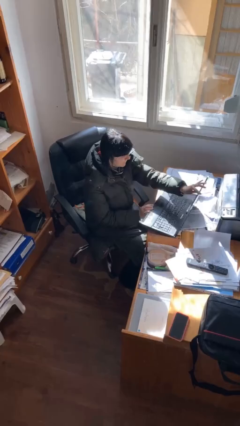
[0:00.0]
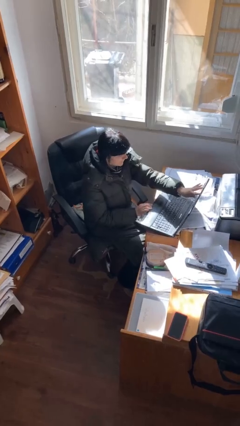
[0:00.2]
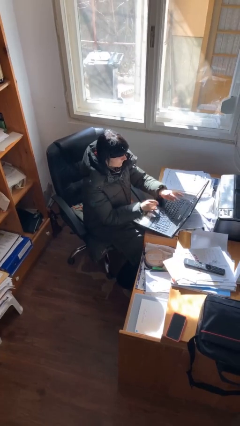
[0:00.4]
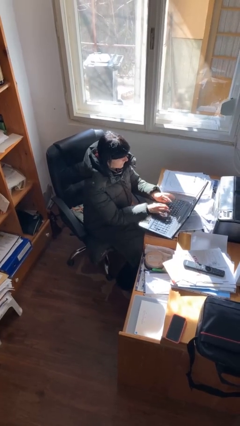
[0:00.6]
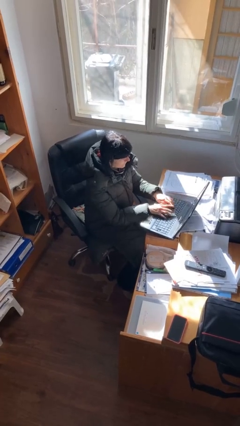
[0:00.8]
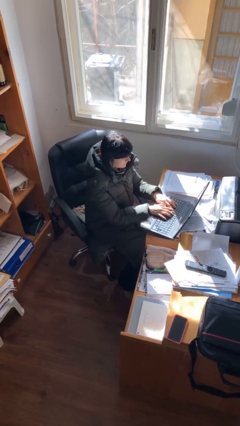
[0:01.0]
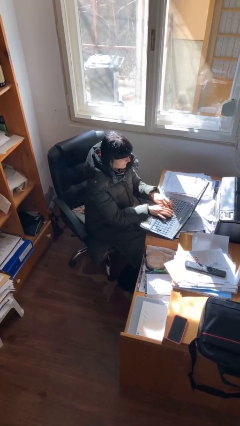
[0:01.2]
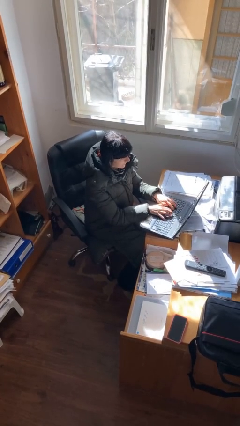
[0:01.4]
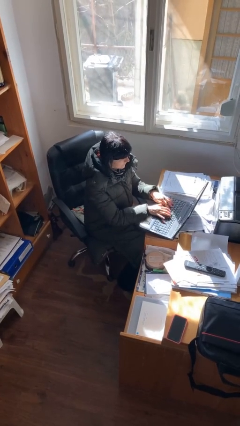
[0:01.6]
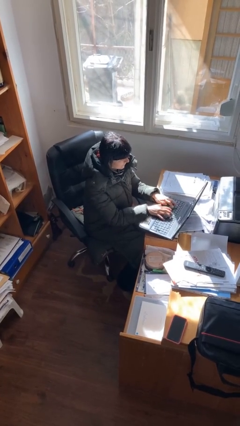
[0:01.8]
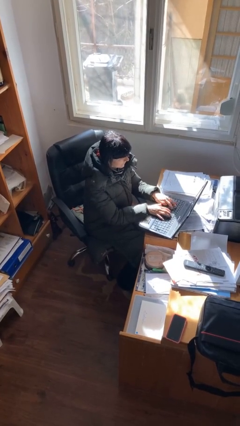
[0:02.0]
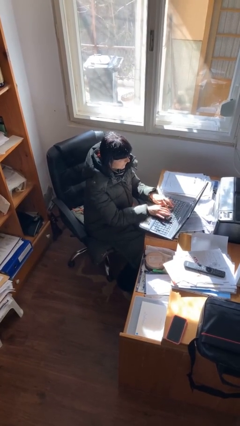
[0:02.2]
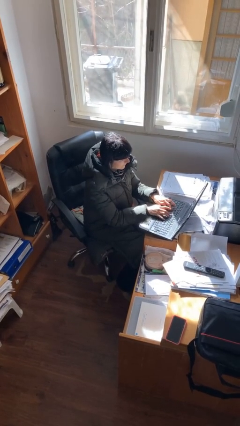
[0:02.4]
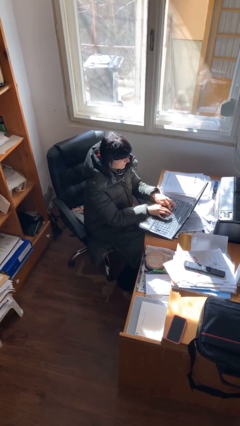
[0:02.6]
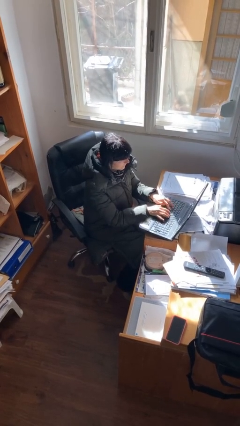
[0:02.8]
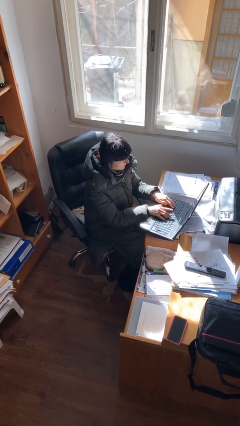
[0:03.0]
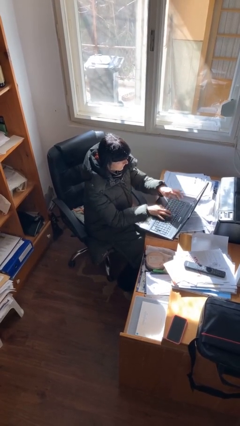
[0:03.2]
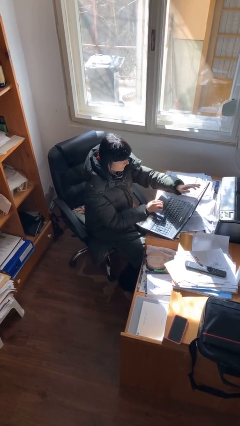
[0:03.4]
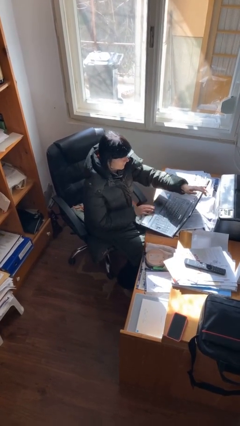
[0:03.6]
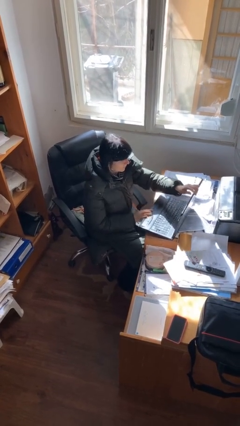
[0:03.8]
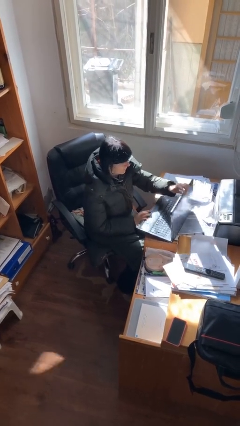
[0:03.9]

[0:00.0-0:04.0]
person interacts with laptop

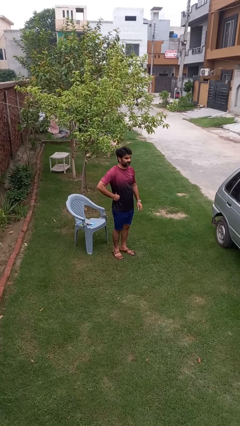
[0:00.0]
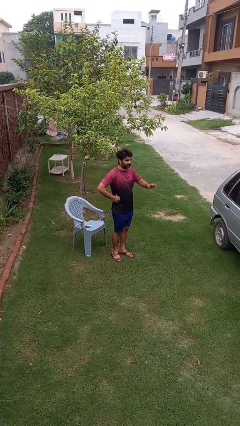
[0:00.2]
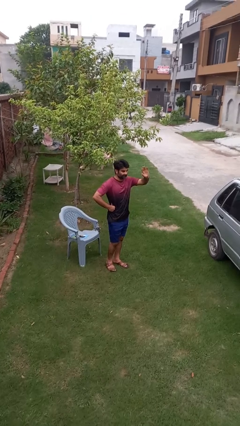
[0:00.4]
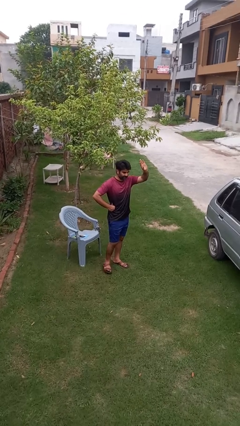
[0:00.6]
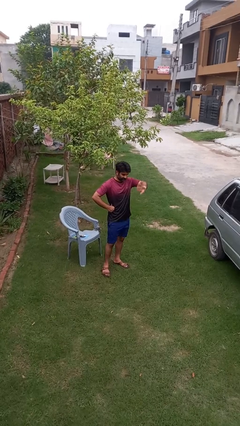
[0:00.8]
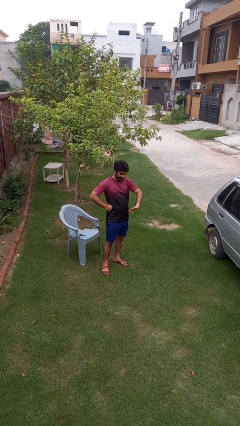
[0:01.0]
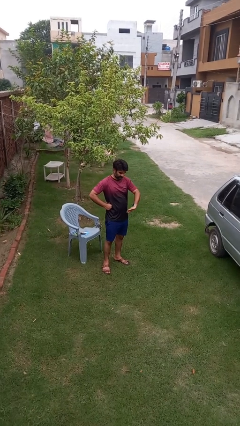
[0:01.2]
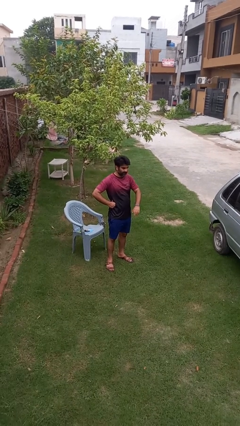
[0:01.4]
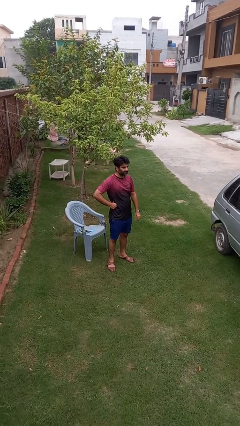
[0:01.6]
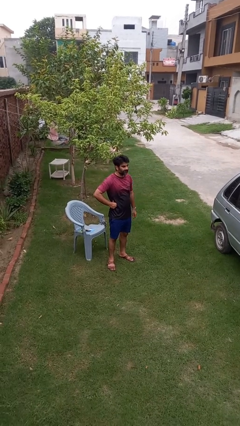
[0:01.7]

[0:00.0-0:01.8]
person gestures swipe down

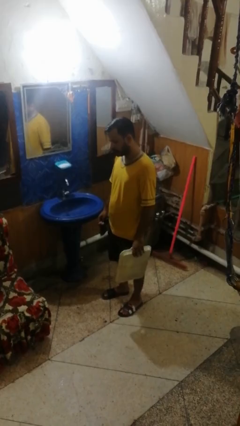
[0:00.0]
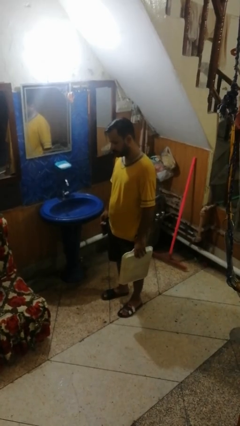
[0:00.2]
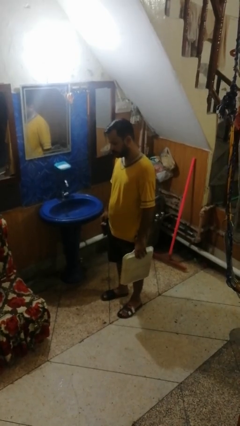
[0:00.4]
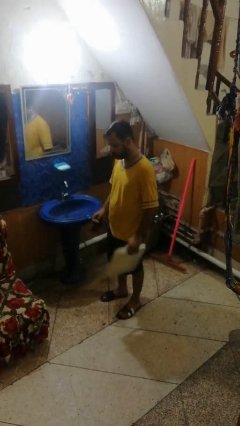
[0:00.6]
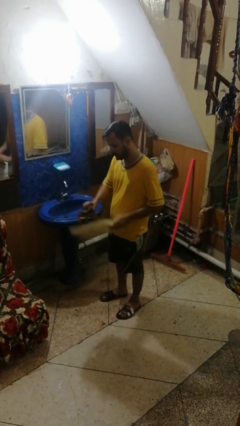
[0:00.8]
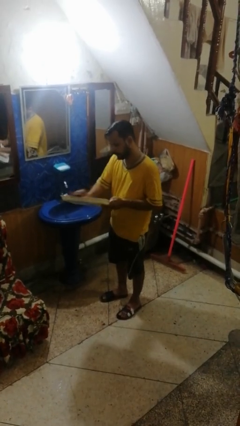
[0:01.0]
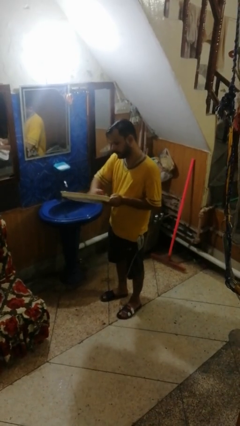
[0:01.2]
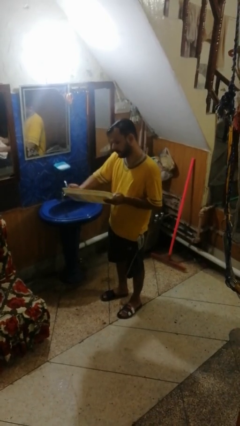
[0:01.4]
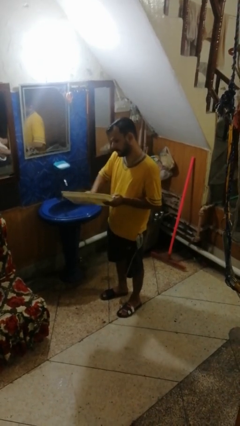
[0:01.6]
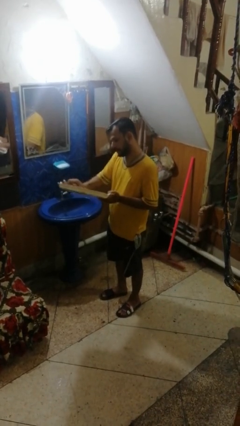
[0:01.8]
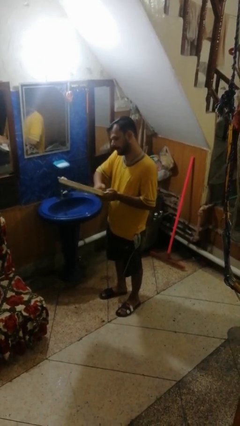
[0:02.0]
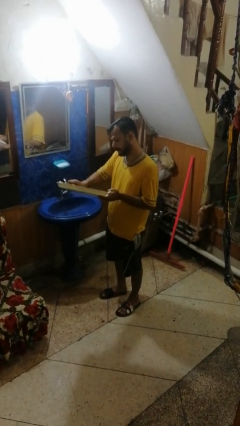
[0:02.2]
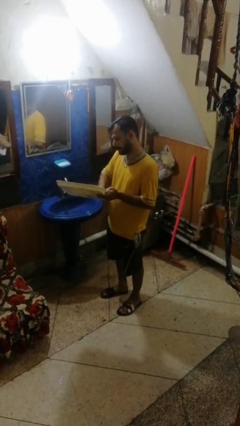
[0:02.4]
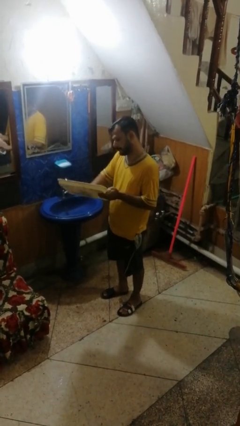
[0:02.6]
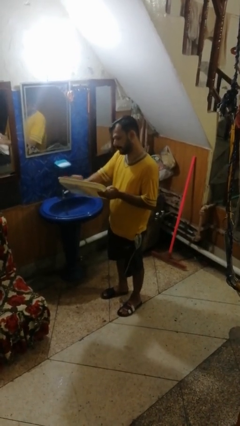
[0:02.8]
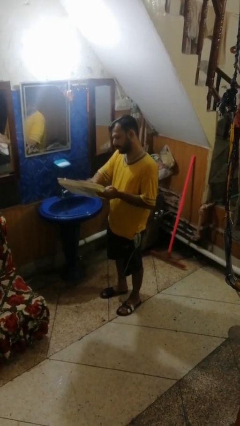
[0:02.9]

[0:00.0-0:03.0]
person dries dish

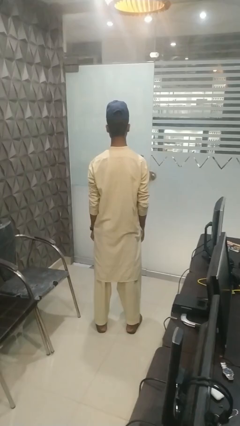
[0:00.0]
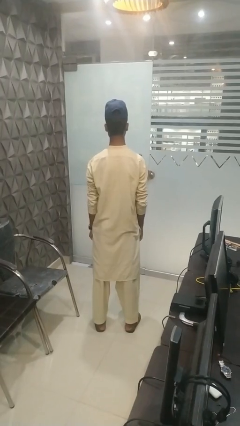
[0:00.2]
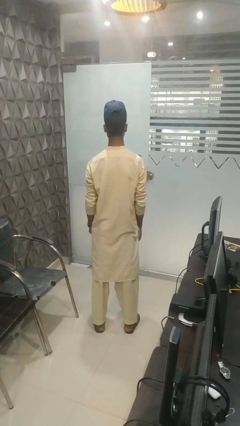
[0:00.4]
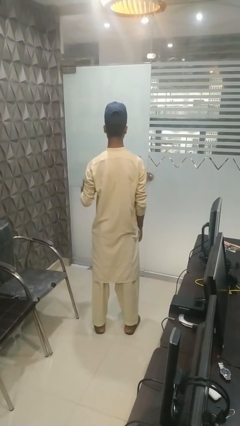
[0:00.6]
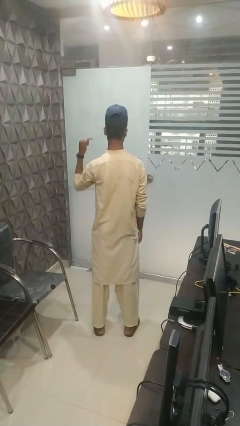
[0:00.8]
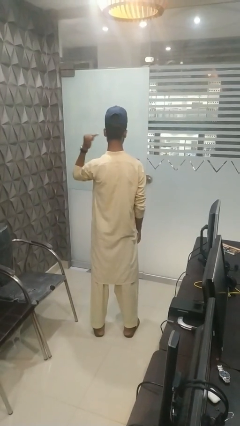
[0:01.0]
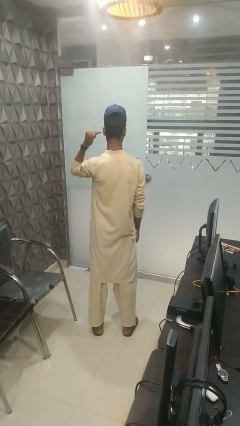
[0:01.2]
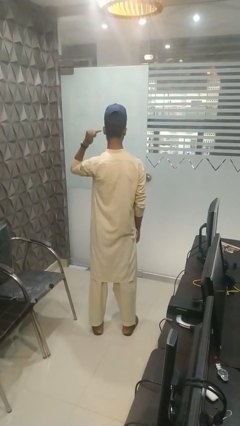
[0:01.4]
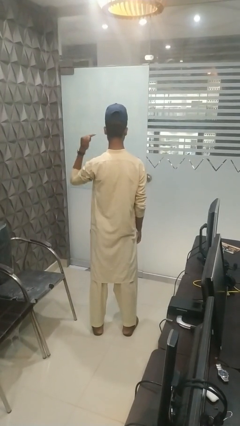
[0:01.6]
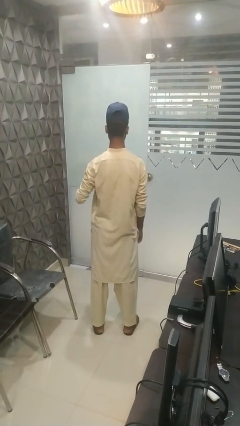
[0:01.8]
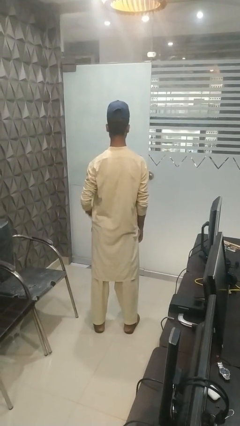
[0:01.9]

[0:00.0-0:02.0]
person gestures listen closely

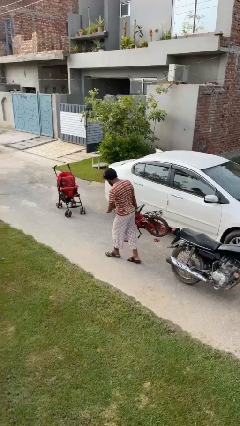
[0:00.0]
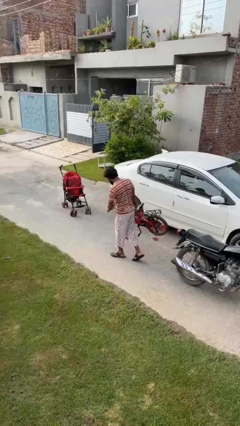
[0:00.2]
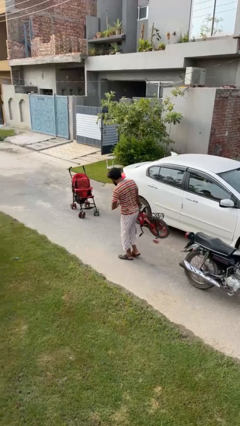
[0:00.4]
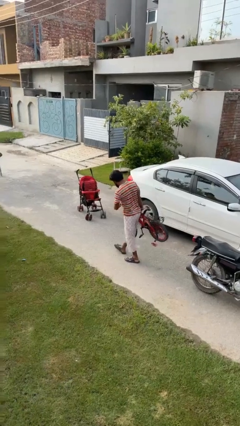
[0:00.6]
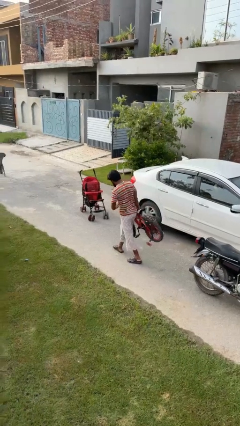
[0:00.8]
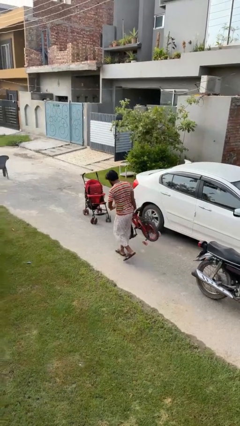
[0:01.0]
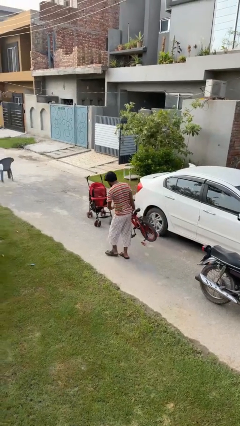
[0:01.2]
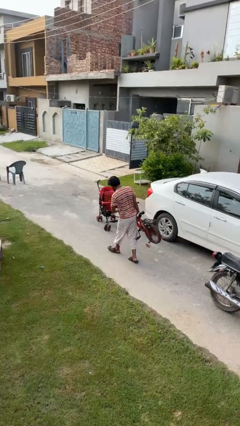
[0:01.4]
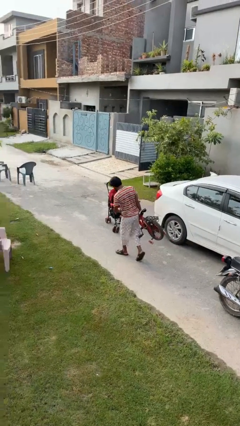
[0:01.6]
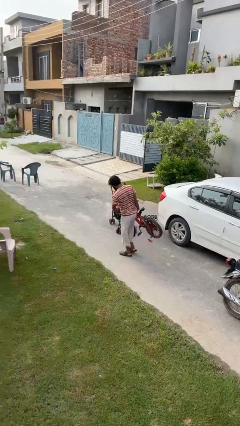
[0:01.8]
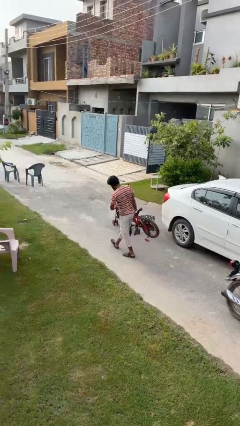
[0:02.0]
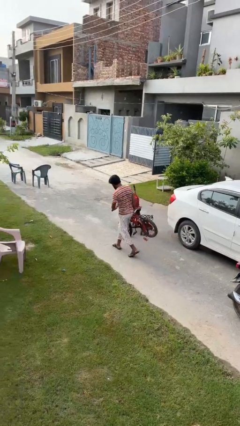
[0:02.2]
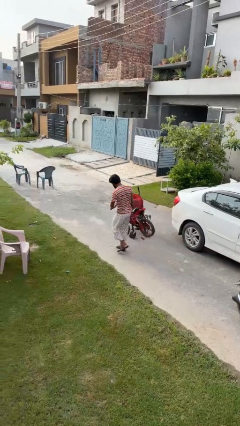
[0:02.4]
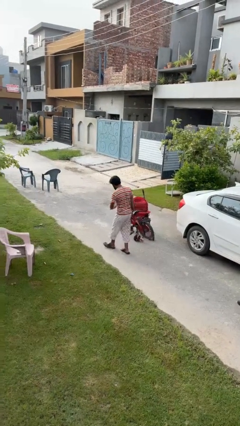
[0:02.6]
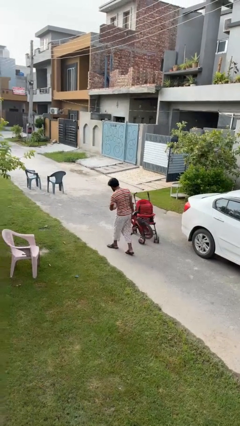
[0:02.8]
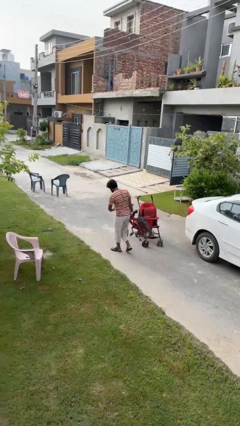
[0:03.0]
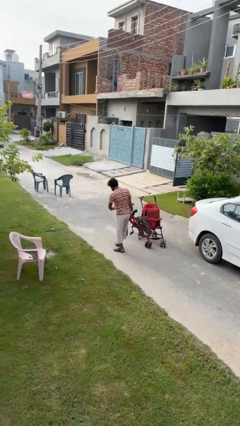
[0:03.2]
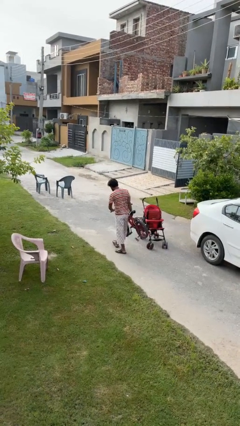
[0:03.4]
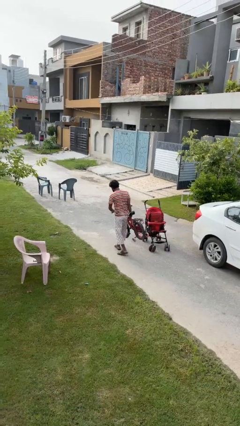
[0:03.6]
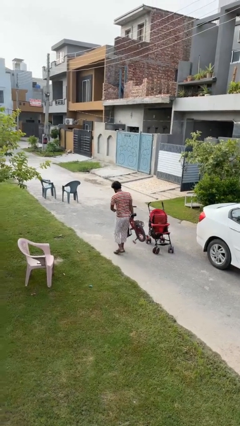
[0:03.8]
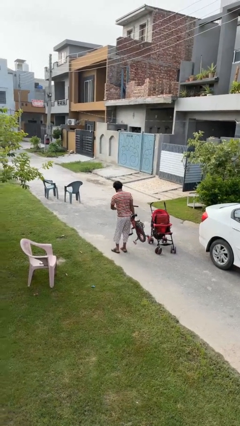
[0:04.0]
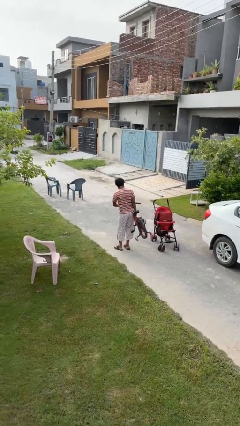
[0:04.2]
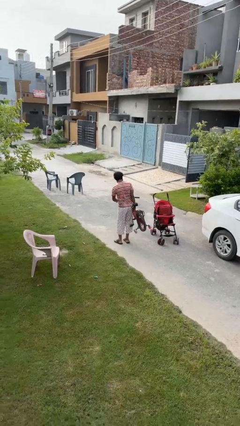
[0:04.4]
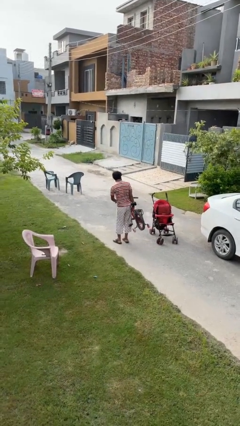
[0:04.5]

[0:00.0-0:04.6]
person carries bicycle

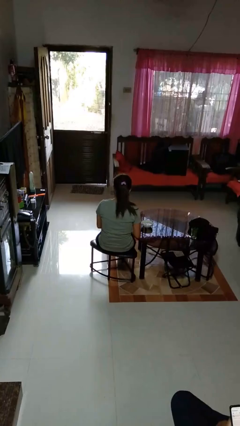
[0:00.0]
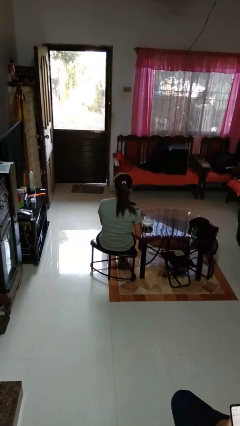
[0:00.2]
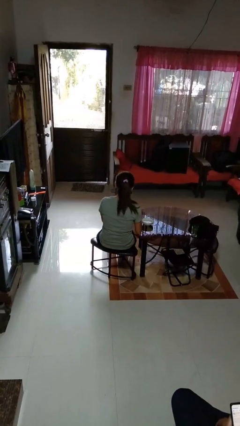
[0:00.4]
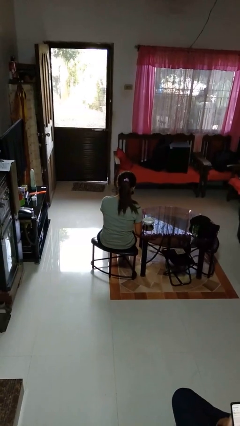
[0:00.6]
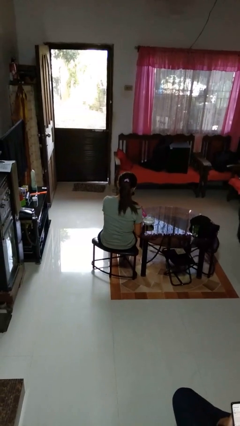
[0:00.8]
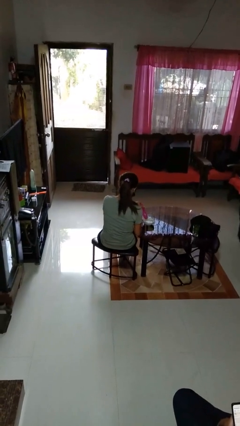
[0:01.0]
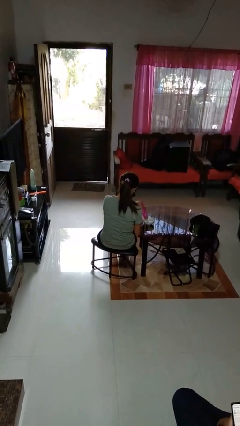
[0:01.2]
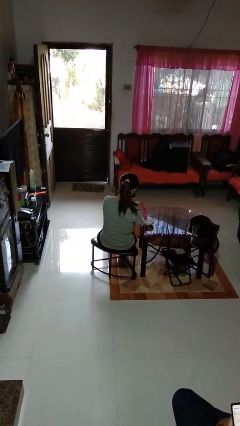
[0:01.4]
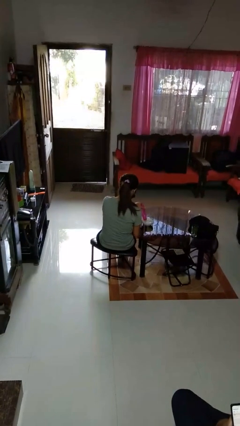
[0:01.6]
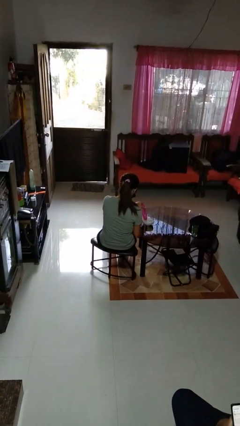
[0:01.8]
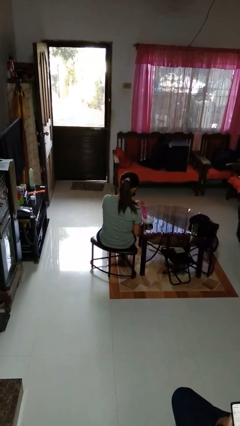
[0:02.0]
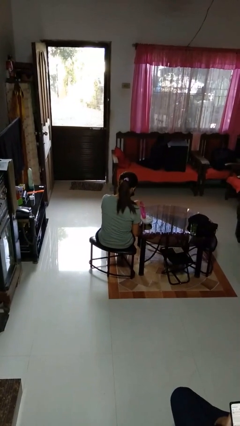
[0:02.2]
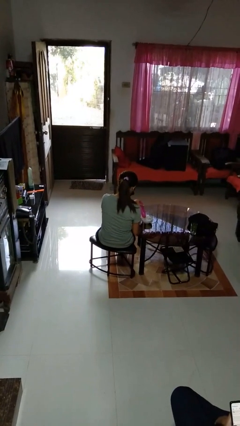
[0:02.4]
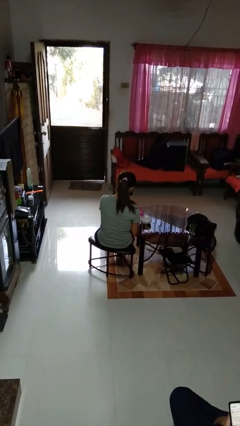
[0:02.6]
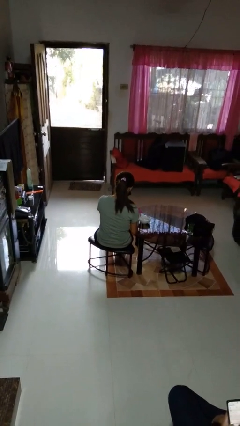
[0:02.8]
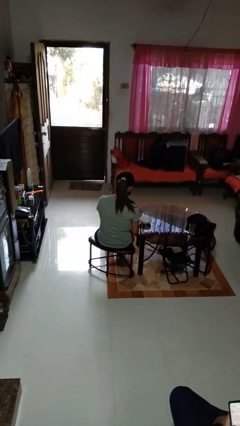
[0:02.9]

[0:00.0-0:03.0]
person pours into bowl
